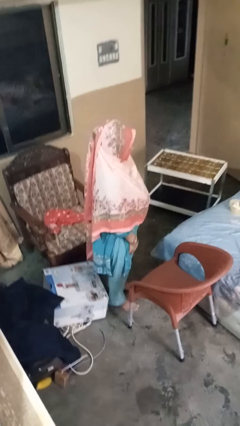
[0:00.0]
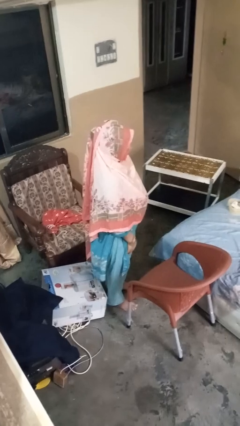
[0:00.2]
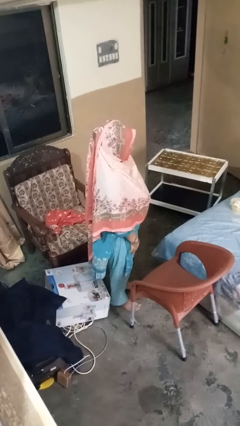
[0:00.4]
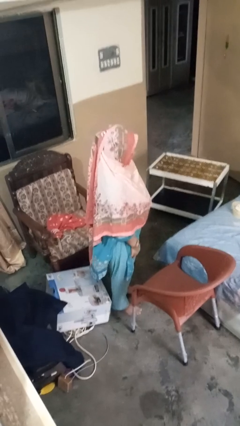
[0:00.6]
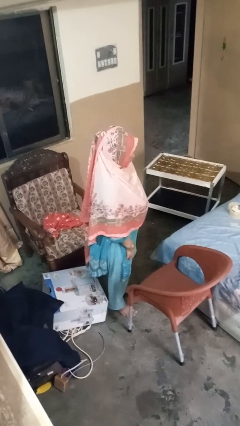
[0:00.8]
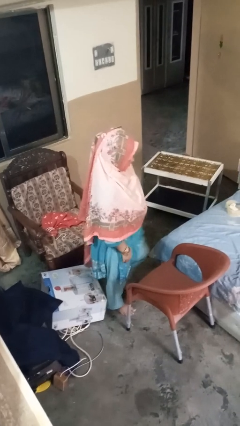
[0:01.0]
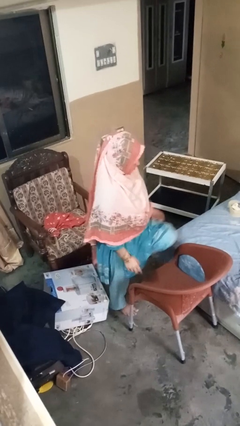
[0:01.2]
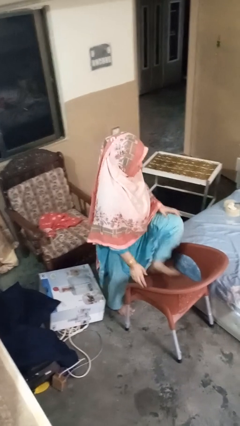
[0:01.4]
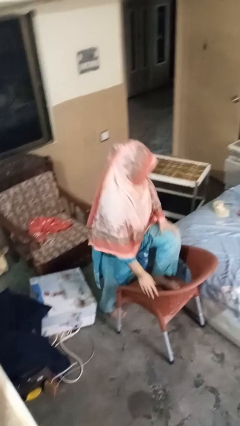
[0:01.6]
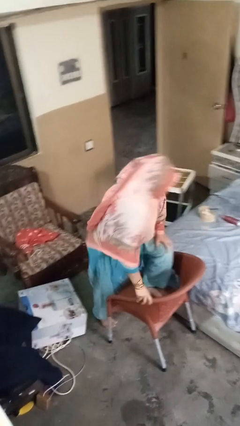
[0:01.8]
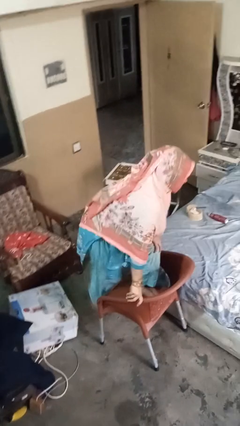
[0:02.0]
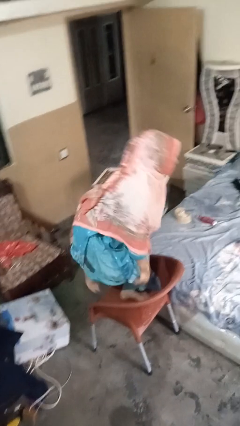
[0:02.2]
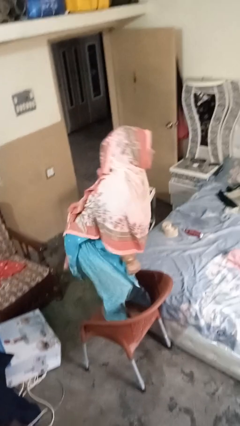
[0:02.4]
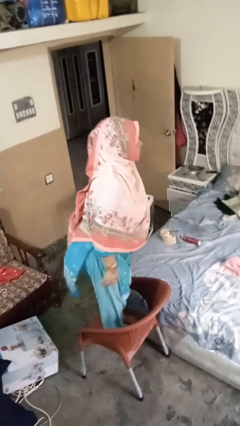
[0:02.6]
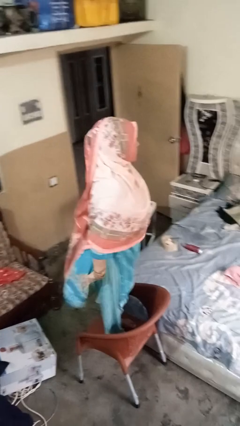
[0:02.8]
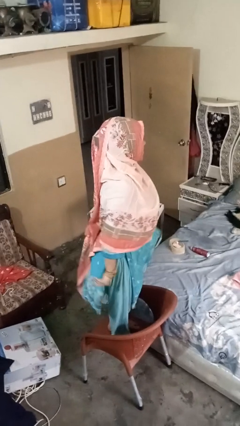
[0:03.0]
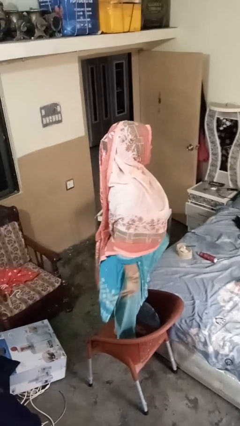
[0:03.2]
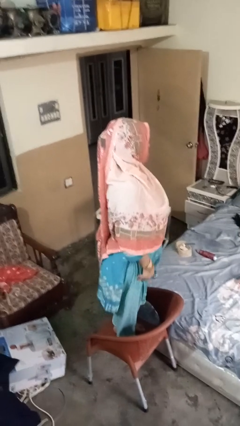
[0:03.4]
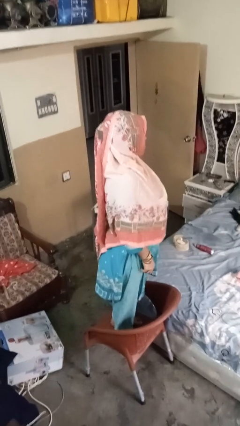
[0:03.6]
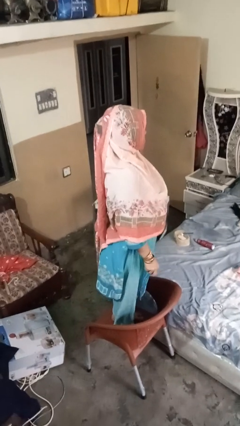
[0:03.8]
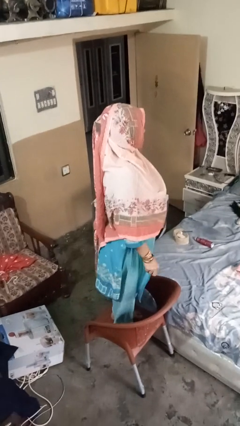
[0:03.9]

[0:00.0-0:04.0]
person climbs on chair

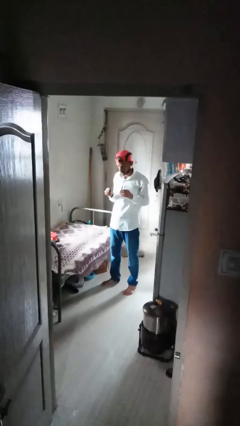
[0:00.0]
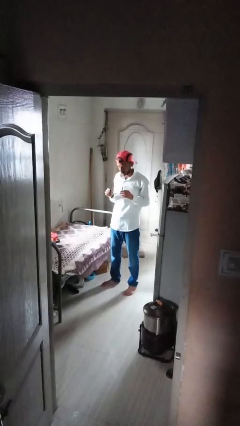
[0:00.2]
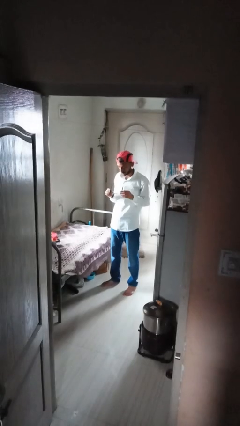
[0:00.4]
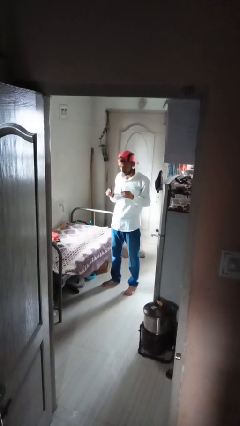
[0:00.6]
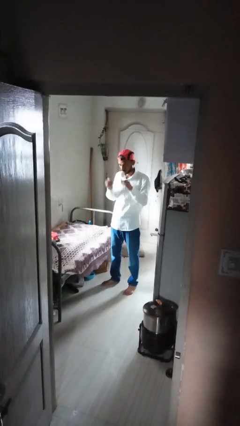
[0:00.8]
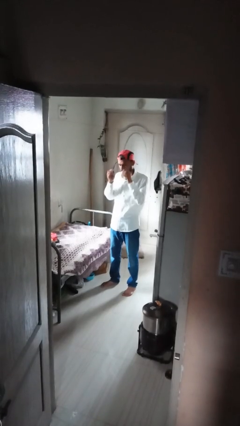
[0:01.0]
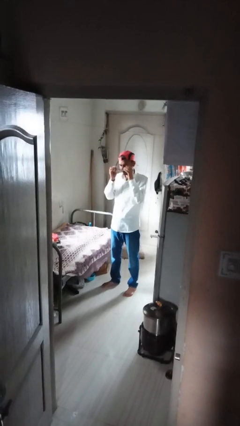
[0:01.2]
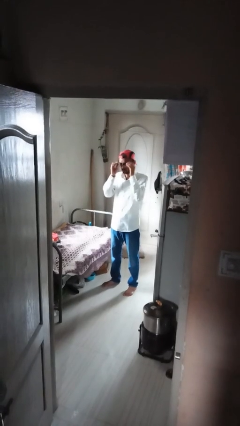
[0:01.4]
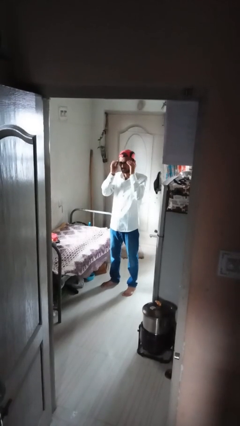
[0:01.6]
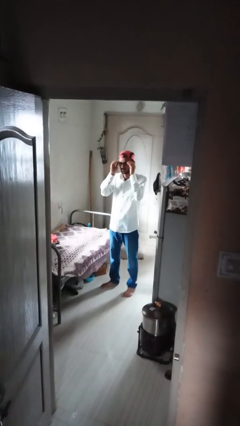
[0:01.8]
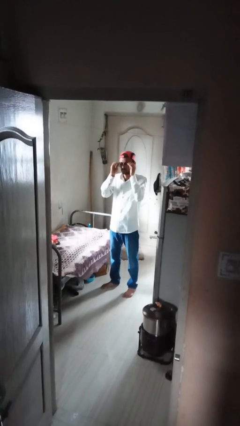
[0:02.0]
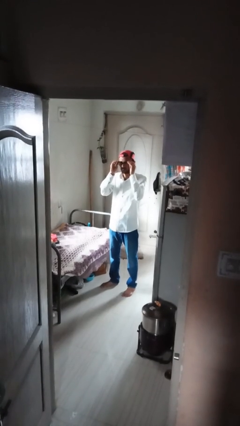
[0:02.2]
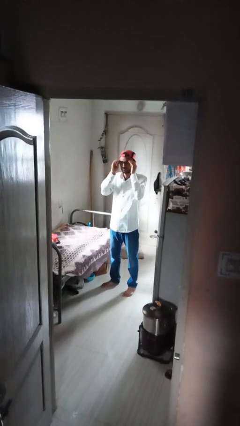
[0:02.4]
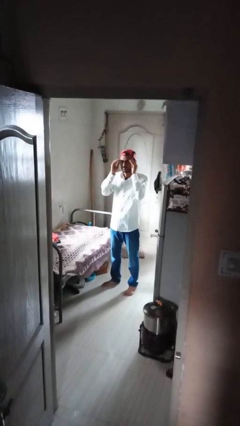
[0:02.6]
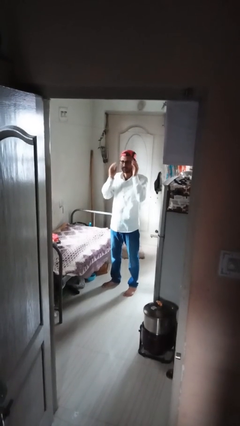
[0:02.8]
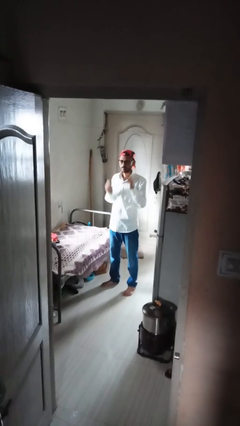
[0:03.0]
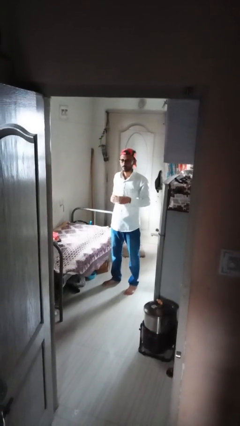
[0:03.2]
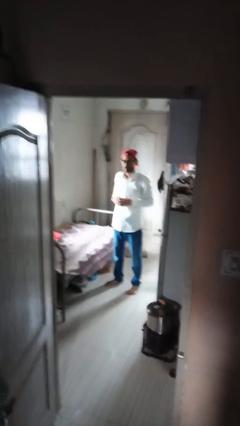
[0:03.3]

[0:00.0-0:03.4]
person puts on glasses

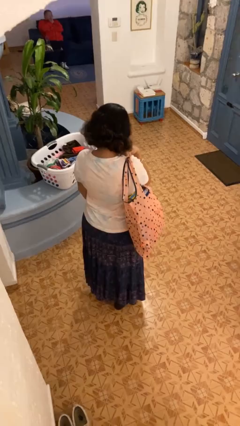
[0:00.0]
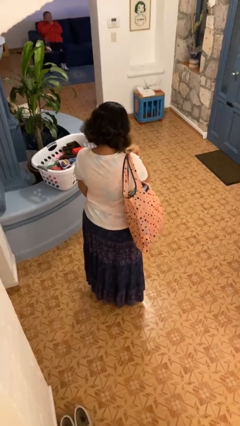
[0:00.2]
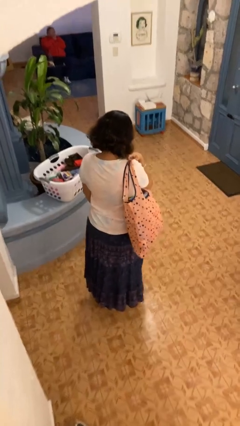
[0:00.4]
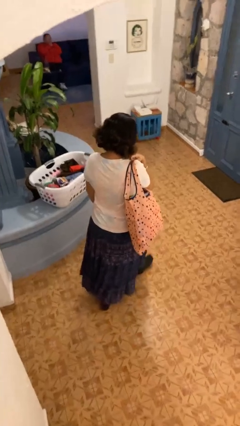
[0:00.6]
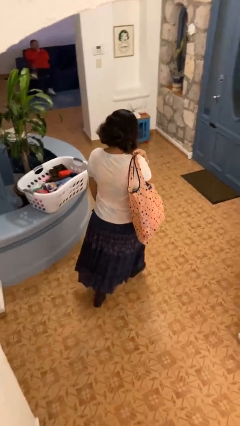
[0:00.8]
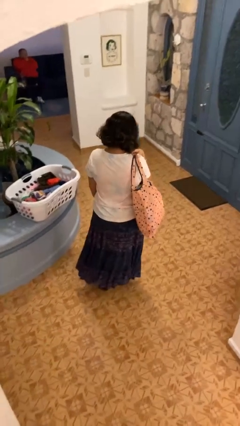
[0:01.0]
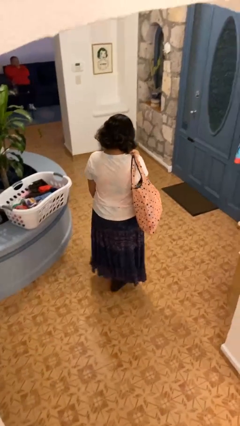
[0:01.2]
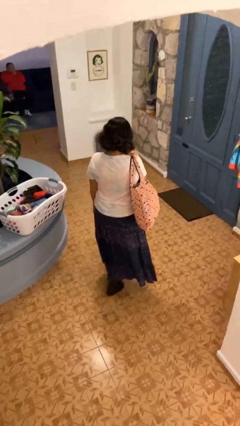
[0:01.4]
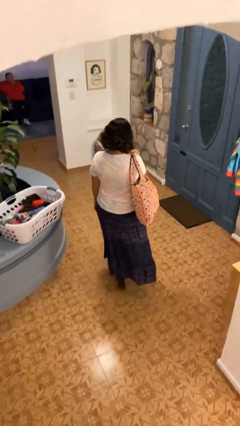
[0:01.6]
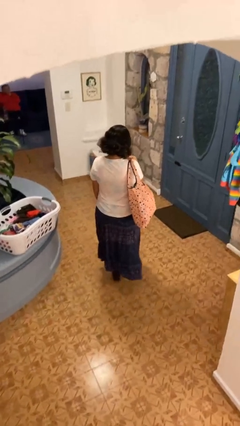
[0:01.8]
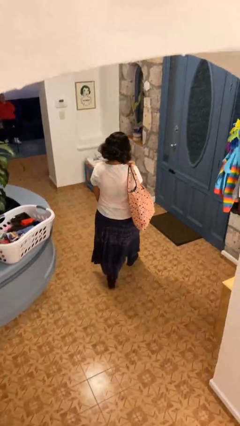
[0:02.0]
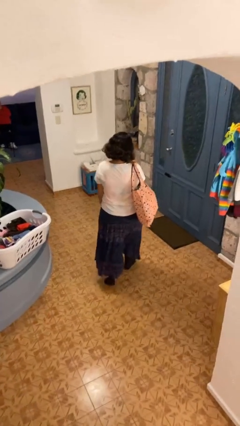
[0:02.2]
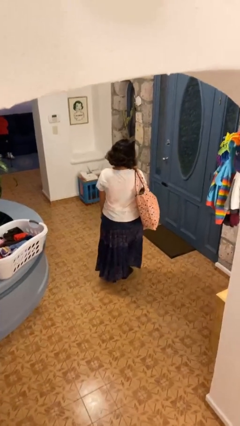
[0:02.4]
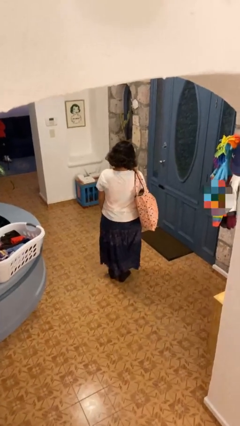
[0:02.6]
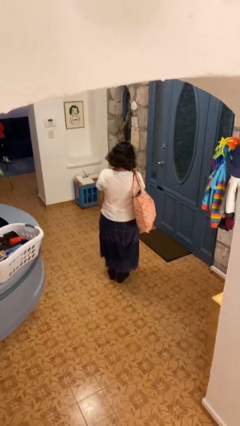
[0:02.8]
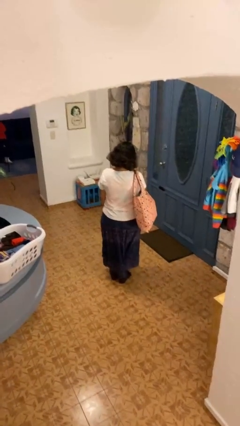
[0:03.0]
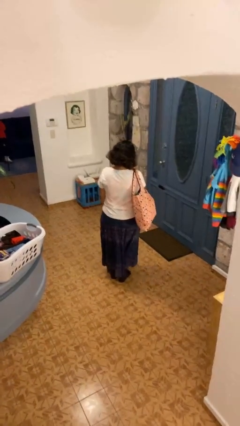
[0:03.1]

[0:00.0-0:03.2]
person carries groceries

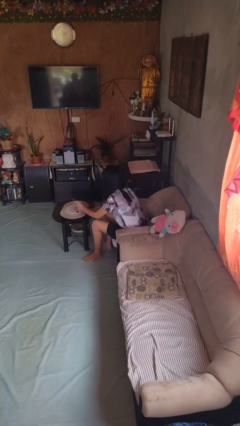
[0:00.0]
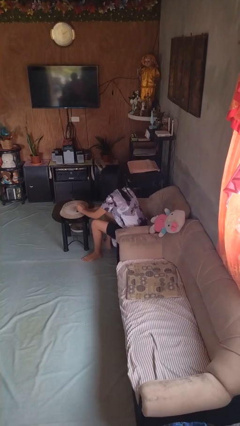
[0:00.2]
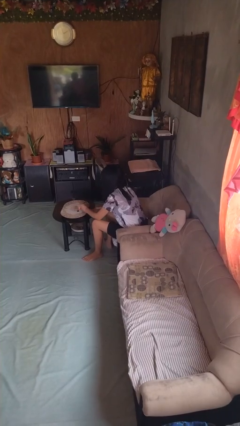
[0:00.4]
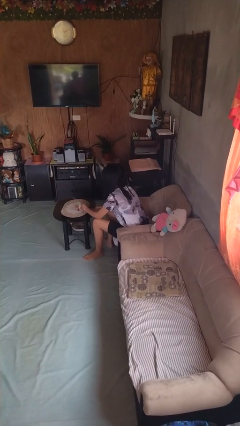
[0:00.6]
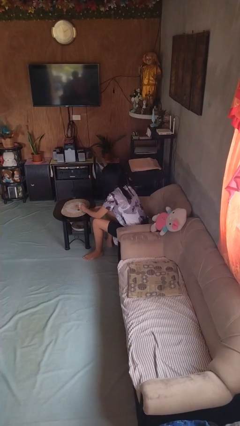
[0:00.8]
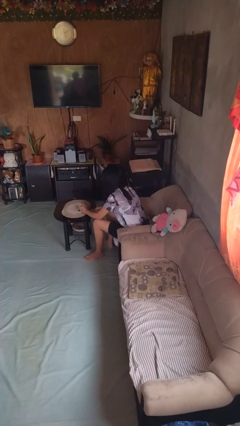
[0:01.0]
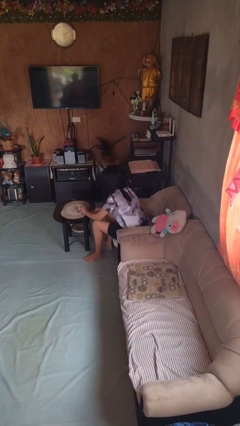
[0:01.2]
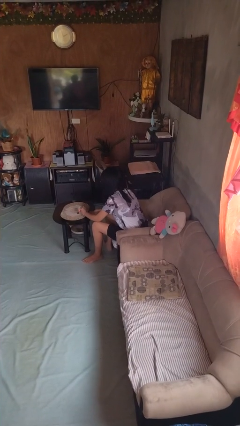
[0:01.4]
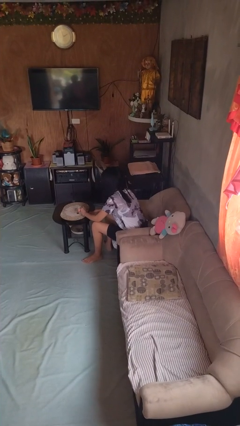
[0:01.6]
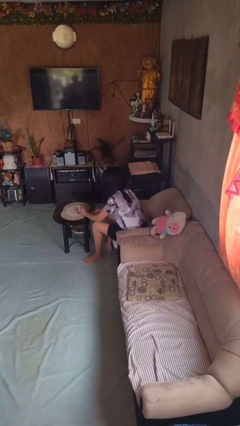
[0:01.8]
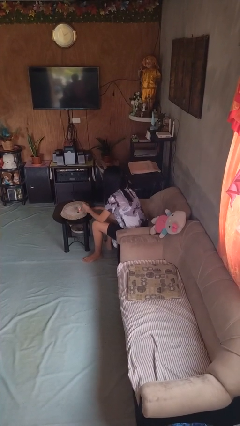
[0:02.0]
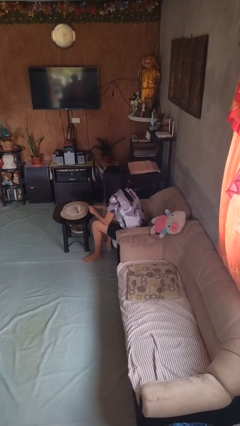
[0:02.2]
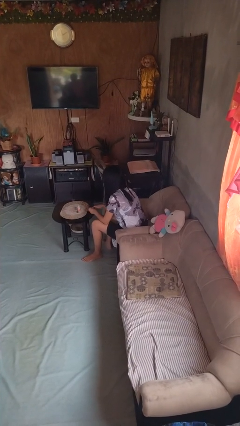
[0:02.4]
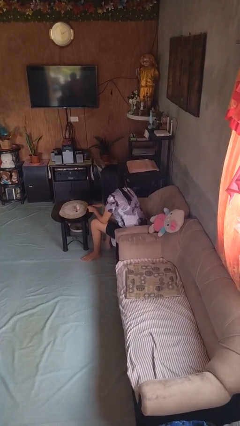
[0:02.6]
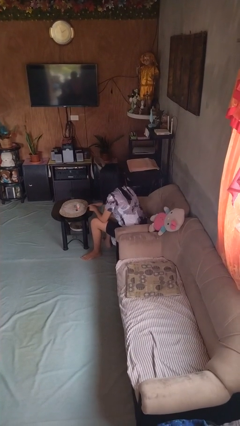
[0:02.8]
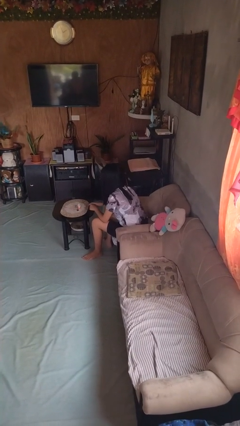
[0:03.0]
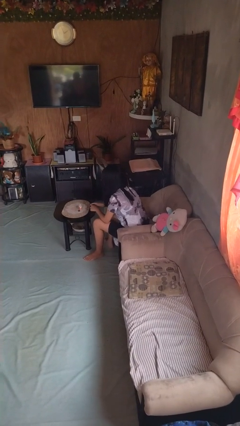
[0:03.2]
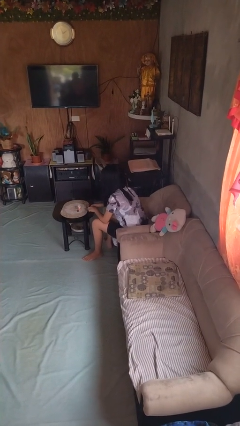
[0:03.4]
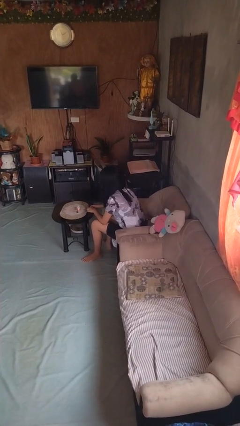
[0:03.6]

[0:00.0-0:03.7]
person paints fingernails

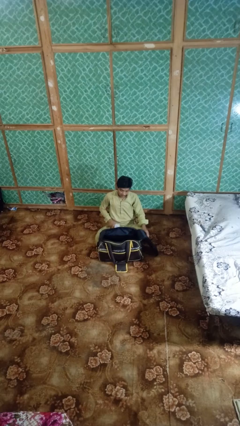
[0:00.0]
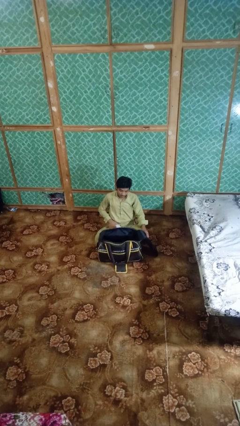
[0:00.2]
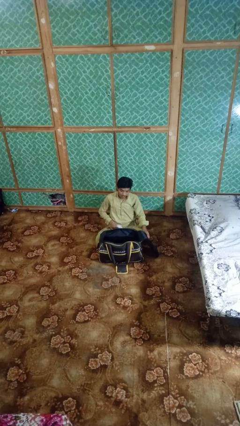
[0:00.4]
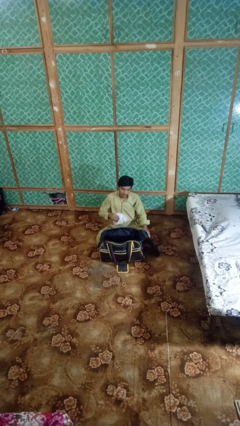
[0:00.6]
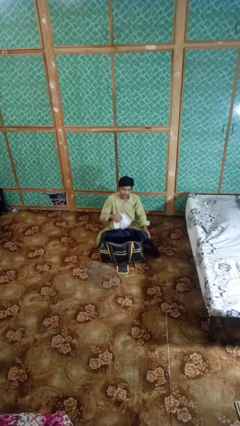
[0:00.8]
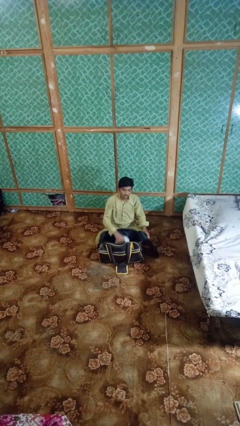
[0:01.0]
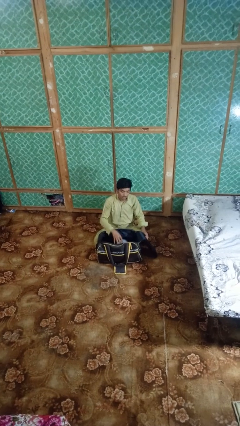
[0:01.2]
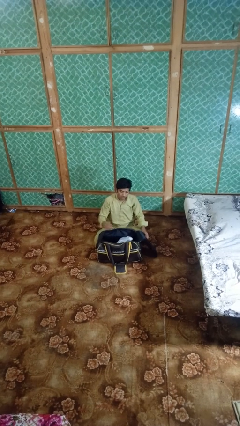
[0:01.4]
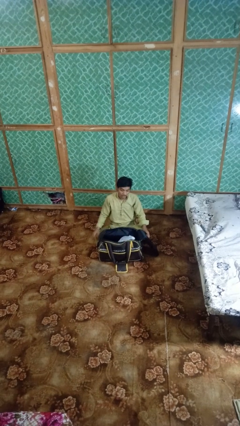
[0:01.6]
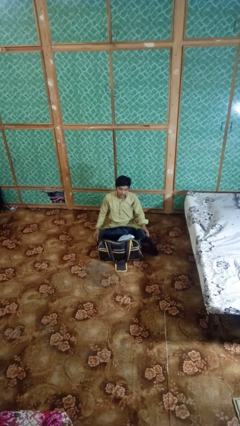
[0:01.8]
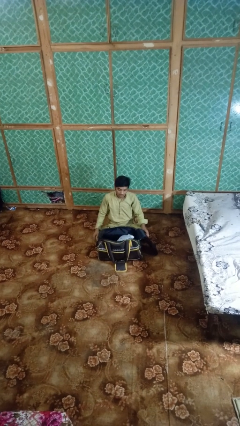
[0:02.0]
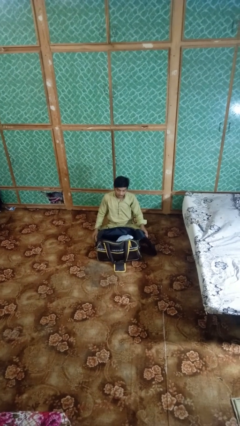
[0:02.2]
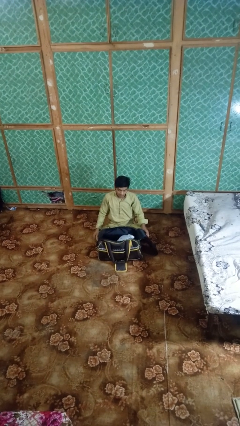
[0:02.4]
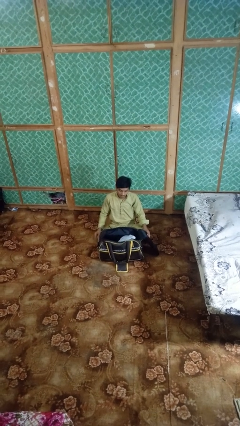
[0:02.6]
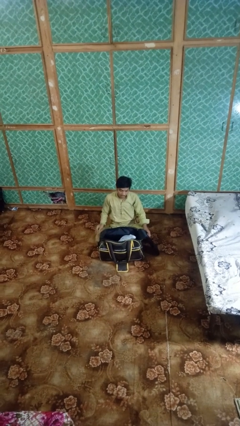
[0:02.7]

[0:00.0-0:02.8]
person puts object into bag

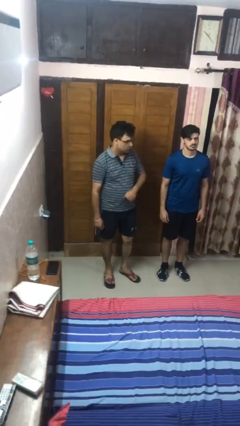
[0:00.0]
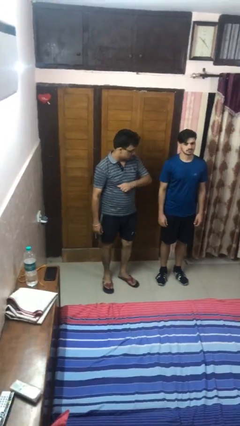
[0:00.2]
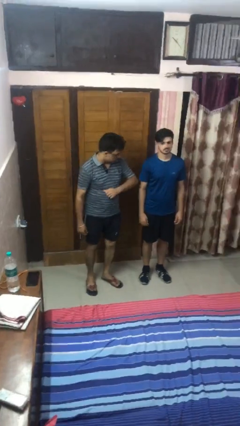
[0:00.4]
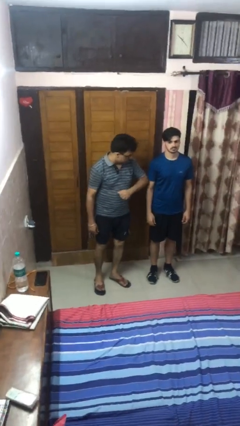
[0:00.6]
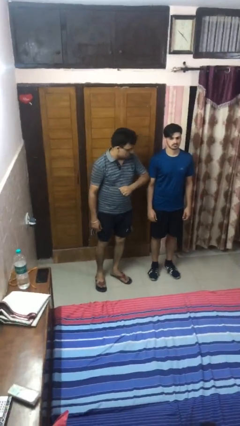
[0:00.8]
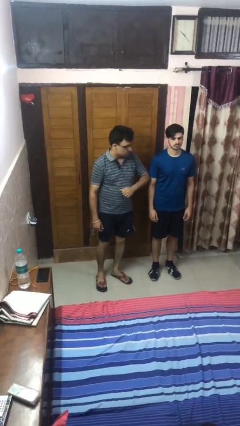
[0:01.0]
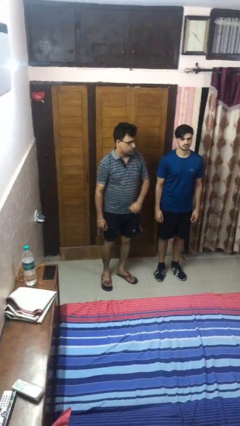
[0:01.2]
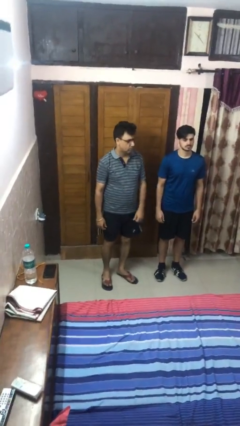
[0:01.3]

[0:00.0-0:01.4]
person nudges person with elbow
